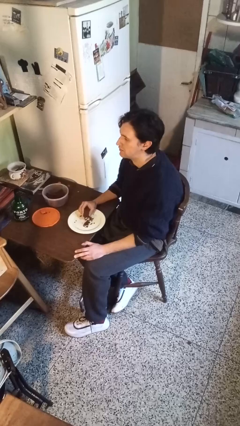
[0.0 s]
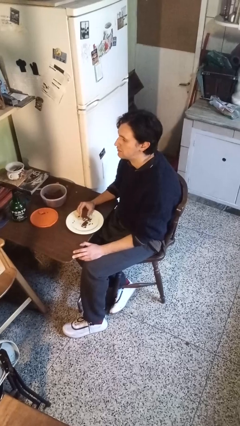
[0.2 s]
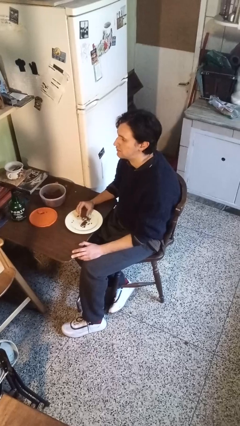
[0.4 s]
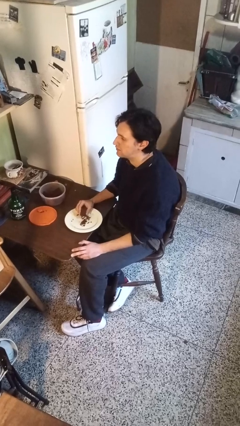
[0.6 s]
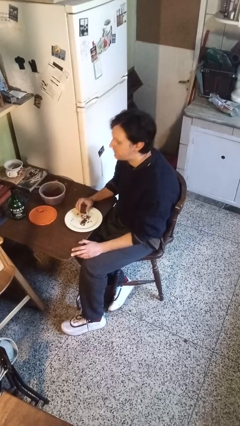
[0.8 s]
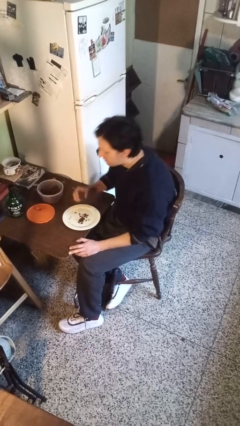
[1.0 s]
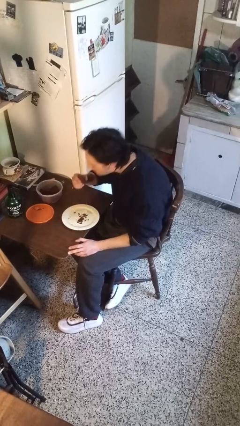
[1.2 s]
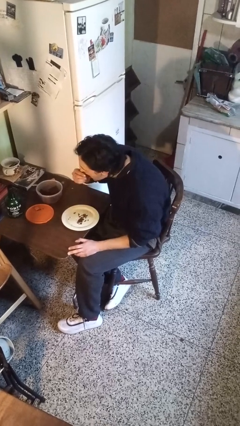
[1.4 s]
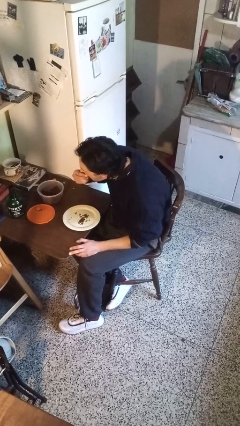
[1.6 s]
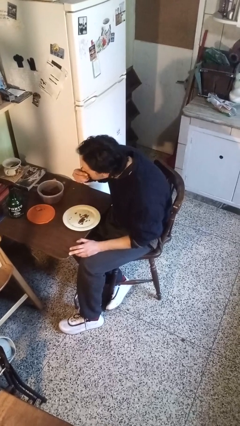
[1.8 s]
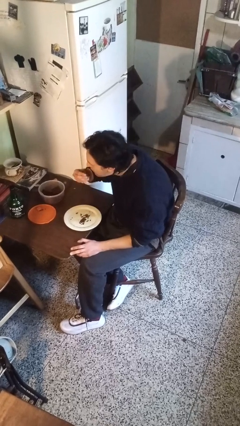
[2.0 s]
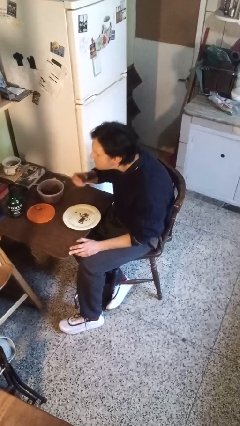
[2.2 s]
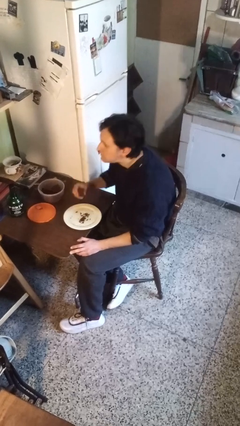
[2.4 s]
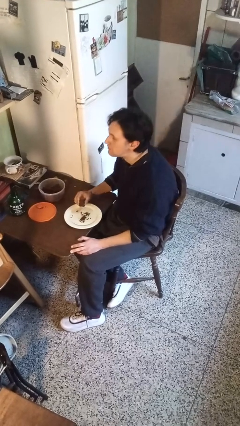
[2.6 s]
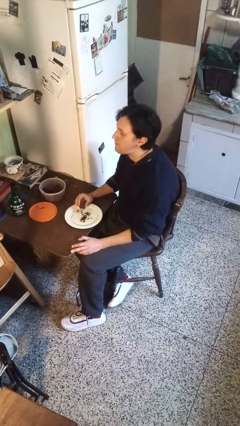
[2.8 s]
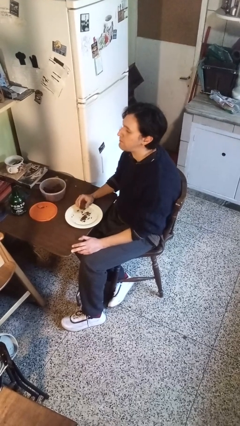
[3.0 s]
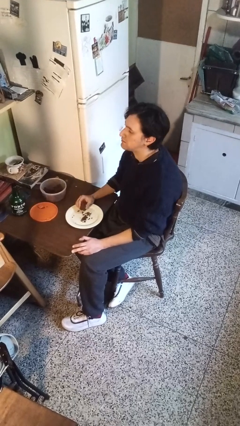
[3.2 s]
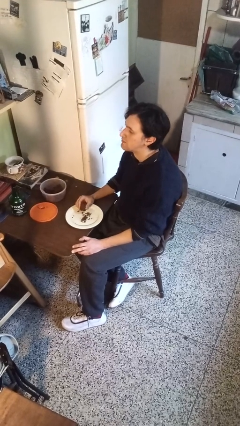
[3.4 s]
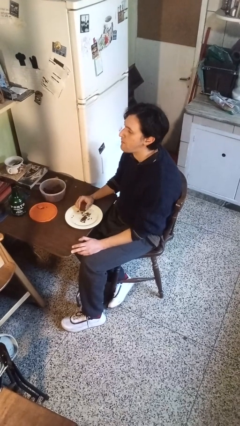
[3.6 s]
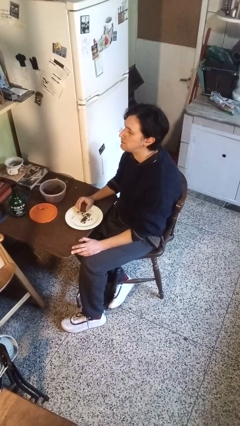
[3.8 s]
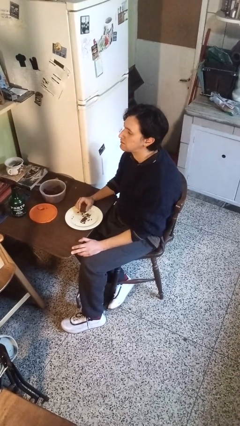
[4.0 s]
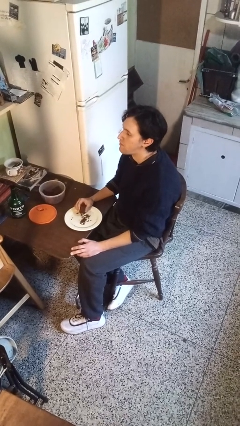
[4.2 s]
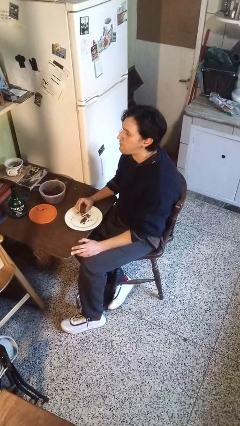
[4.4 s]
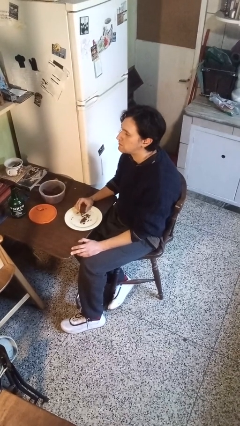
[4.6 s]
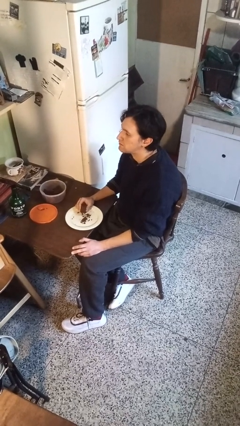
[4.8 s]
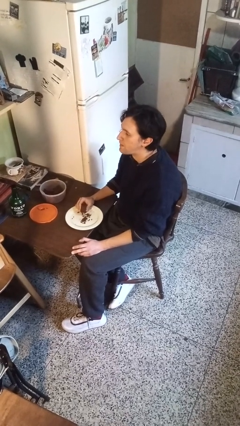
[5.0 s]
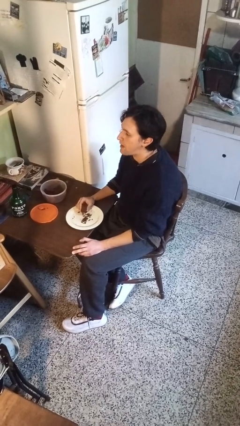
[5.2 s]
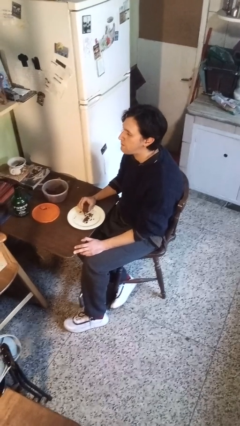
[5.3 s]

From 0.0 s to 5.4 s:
person eats with hands

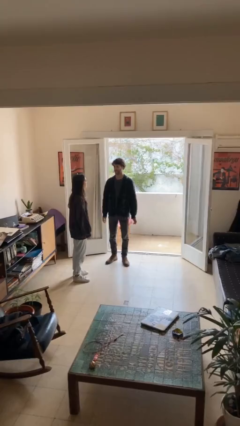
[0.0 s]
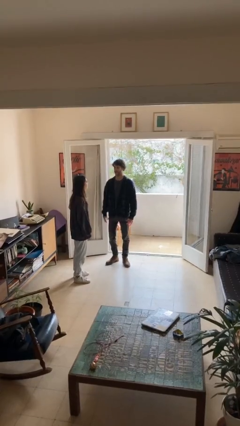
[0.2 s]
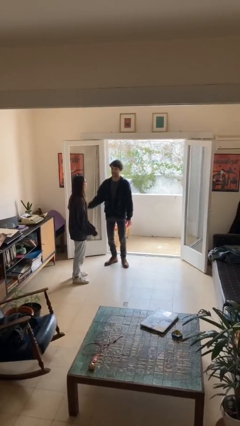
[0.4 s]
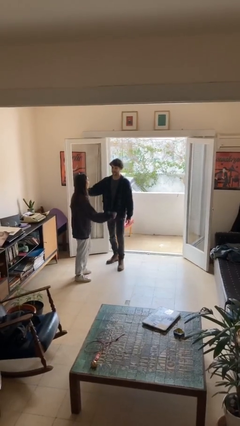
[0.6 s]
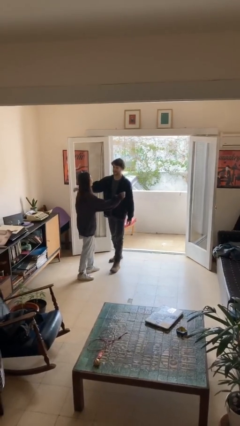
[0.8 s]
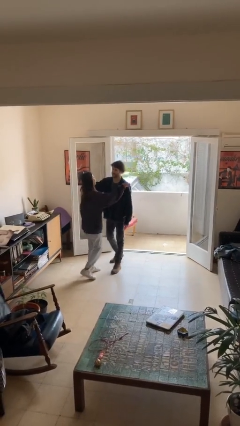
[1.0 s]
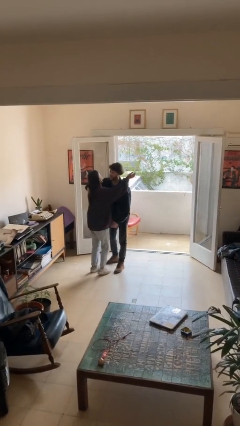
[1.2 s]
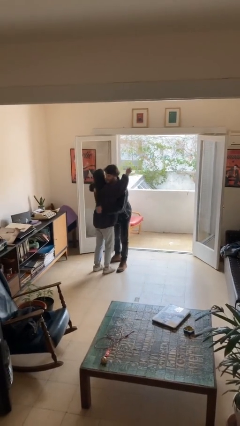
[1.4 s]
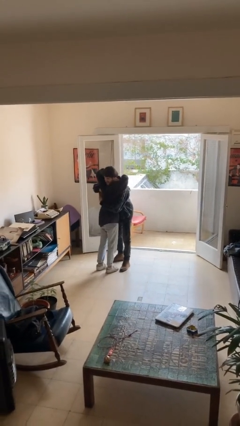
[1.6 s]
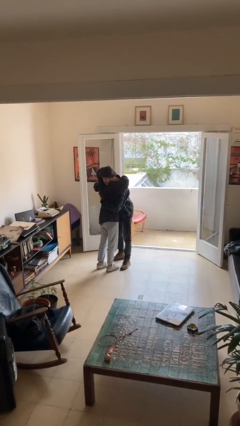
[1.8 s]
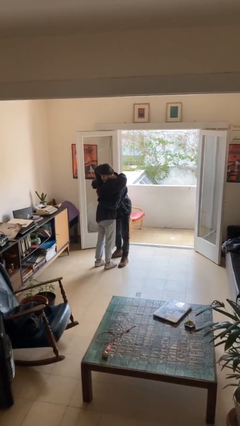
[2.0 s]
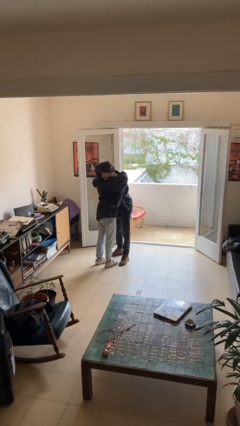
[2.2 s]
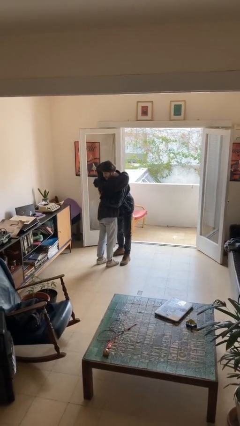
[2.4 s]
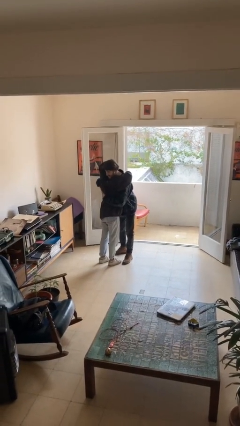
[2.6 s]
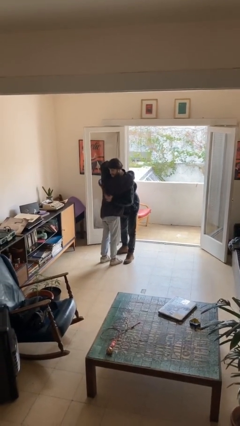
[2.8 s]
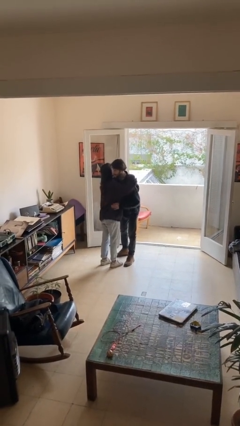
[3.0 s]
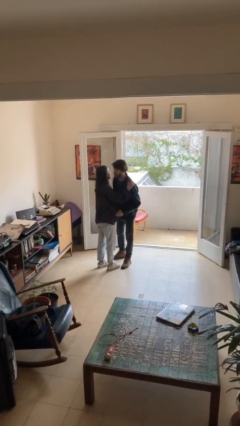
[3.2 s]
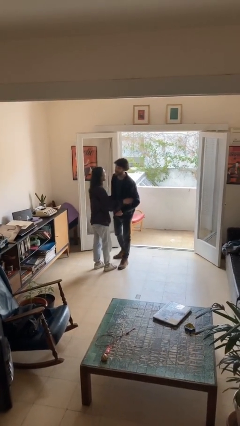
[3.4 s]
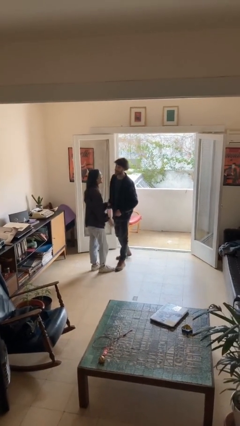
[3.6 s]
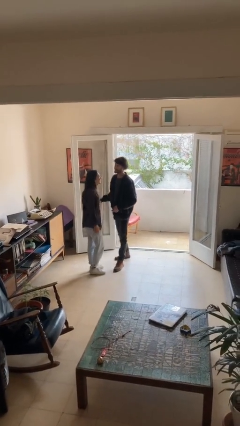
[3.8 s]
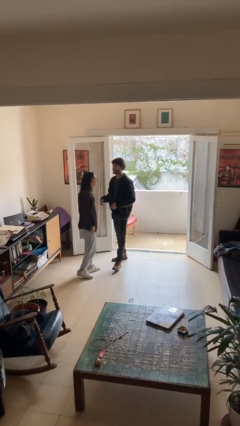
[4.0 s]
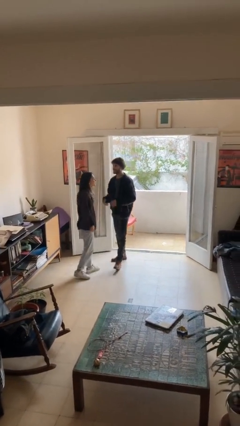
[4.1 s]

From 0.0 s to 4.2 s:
person embraces person

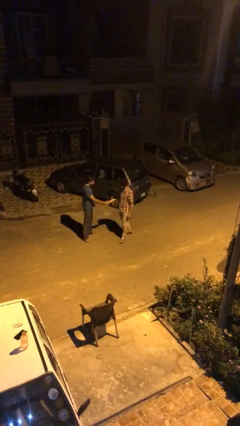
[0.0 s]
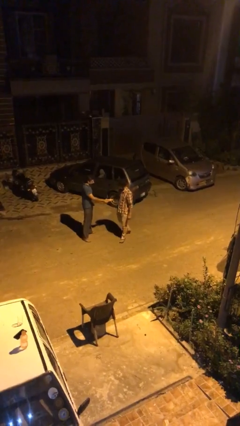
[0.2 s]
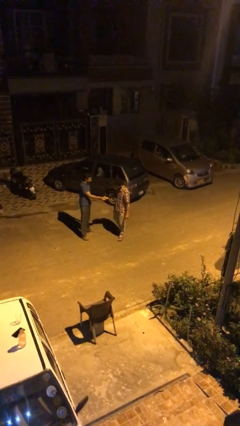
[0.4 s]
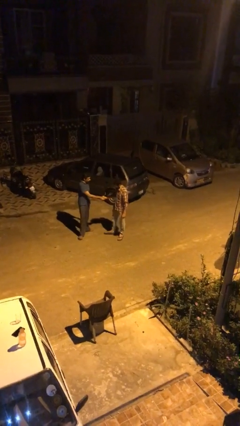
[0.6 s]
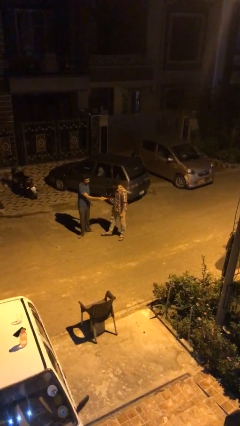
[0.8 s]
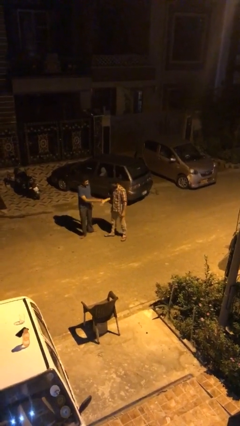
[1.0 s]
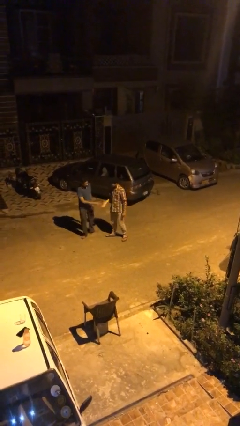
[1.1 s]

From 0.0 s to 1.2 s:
person shakes hand

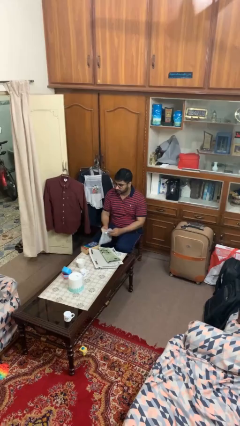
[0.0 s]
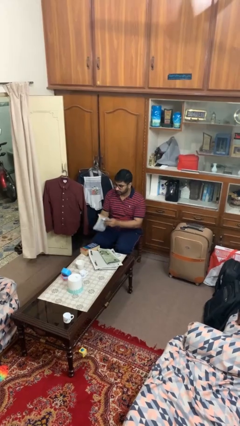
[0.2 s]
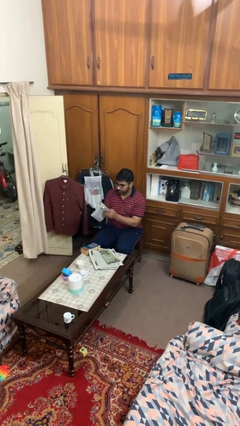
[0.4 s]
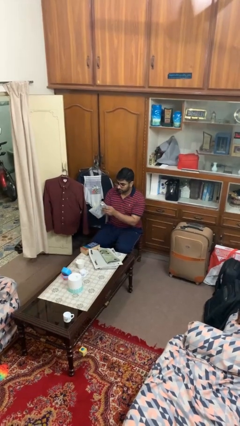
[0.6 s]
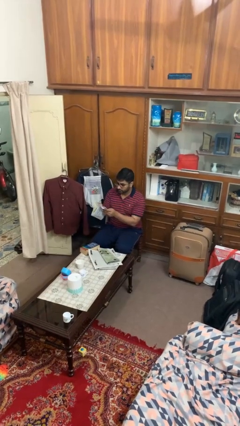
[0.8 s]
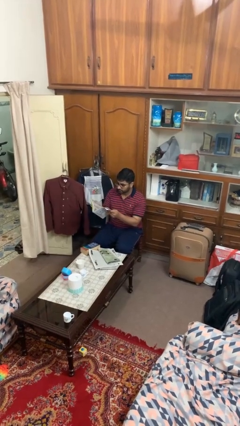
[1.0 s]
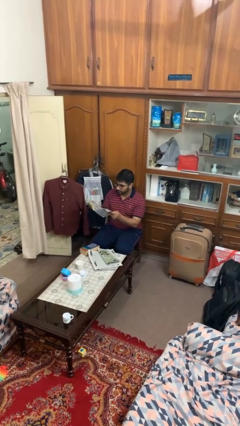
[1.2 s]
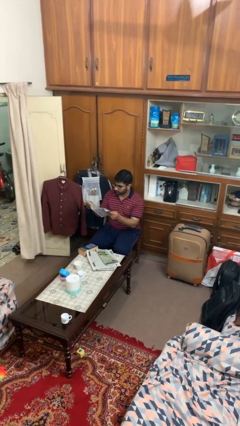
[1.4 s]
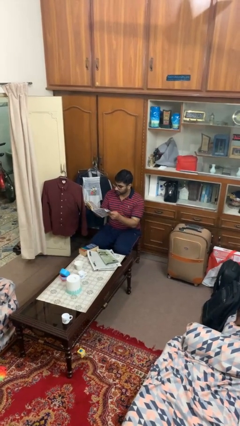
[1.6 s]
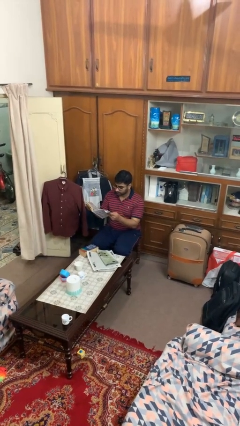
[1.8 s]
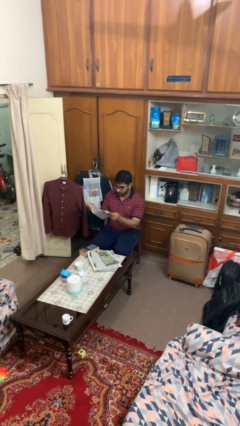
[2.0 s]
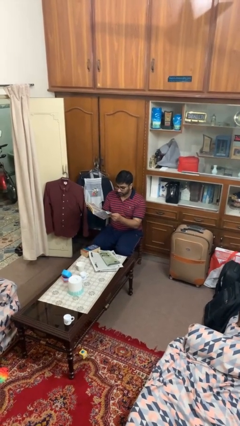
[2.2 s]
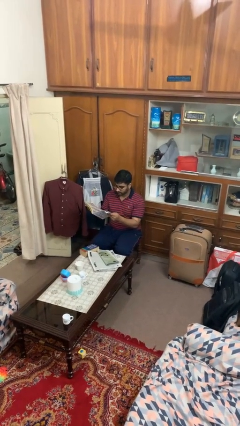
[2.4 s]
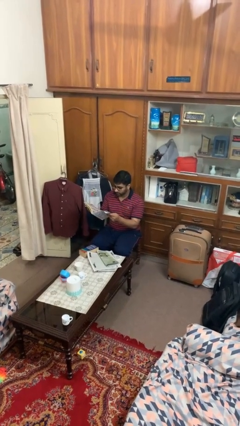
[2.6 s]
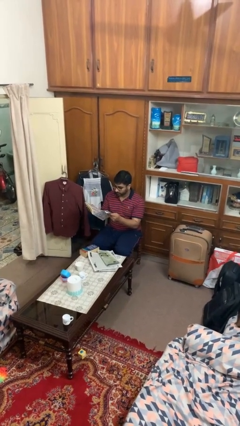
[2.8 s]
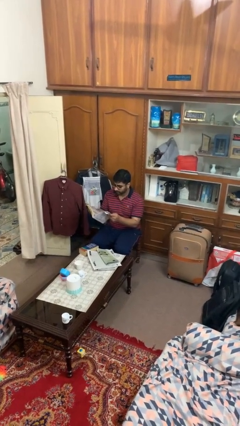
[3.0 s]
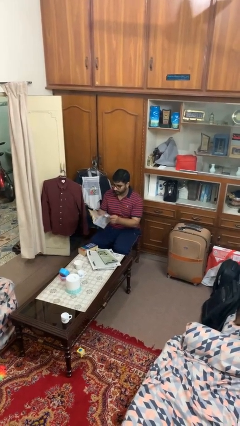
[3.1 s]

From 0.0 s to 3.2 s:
person reads magazine

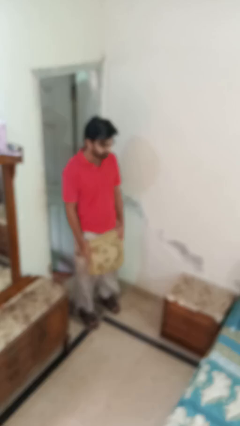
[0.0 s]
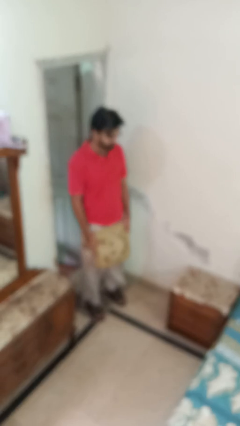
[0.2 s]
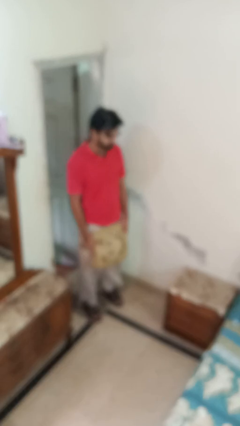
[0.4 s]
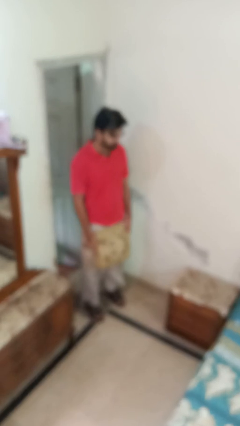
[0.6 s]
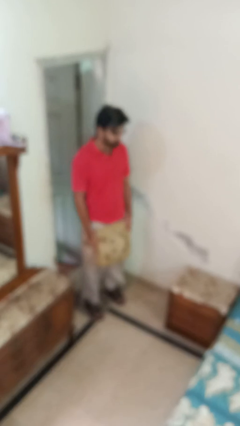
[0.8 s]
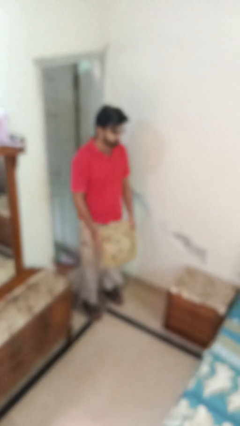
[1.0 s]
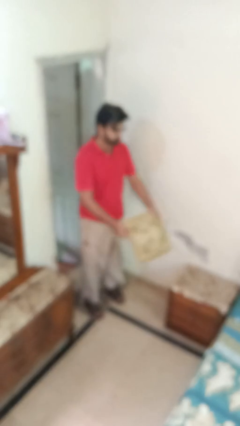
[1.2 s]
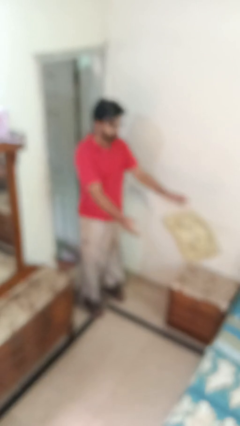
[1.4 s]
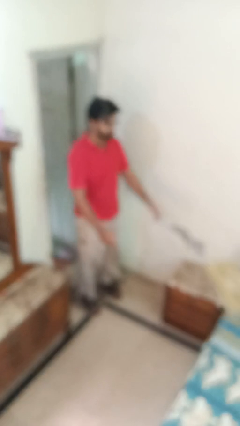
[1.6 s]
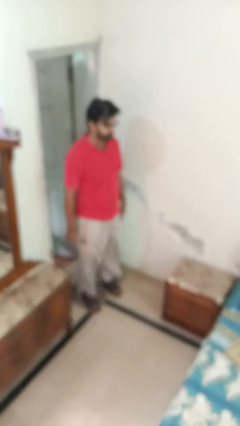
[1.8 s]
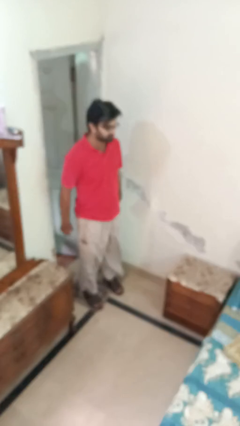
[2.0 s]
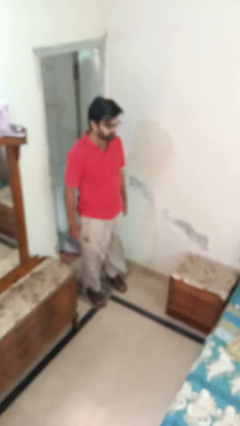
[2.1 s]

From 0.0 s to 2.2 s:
person throws object on bed

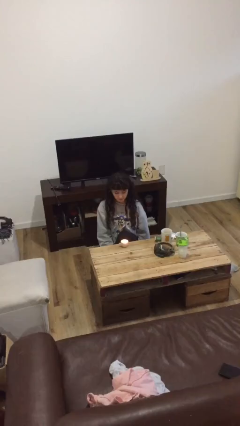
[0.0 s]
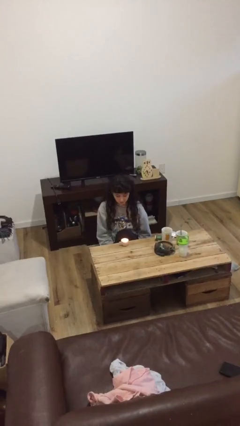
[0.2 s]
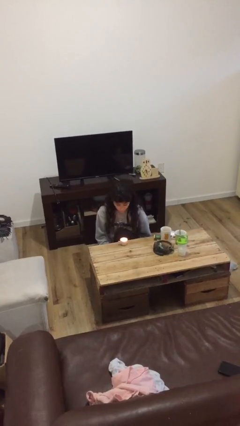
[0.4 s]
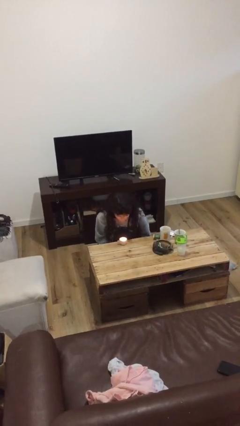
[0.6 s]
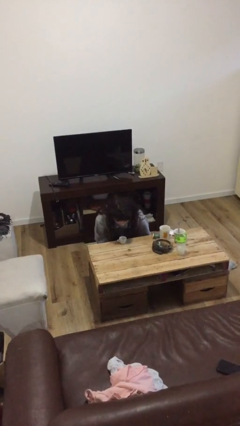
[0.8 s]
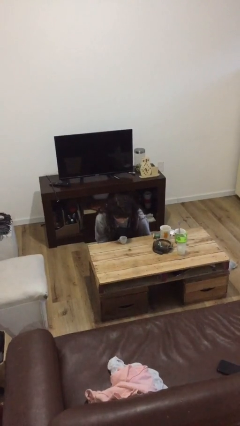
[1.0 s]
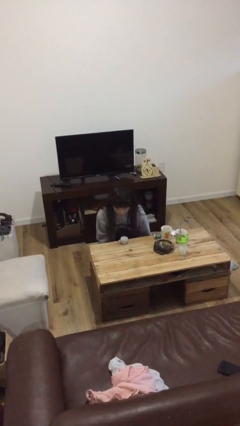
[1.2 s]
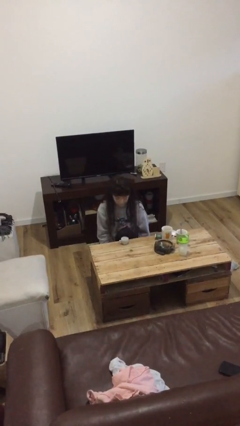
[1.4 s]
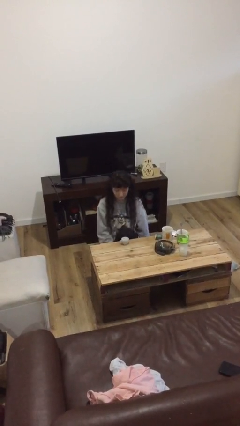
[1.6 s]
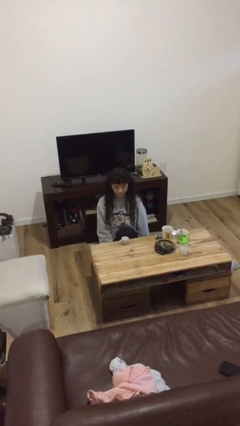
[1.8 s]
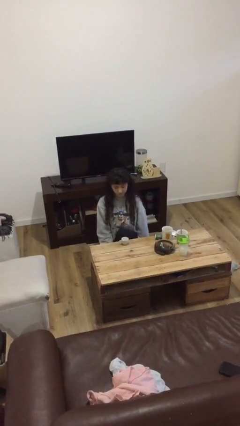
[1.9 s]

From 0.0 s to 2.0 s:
person extinguishes candle
